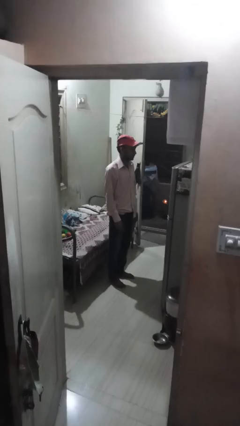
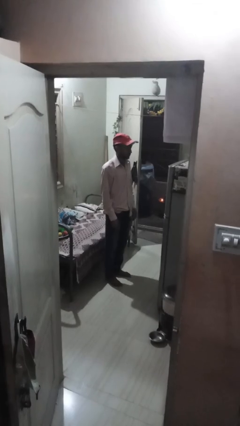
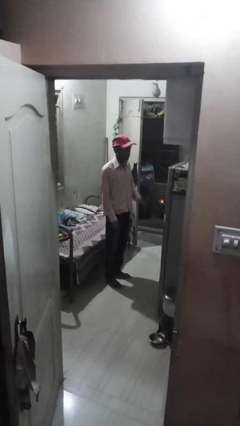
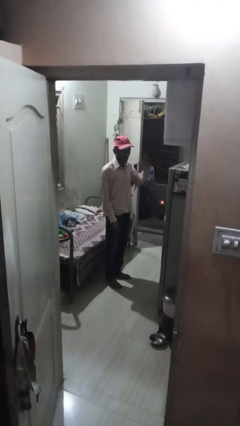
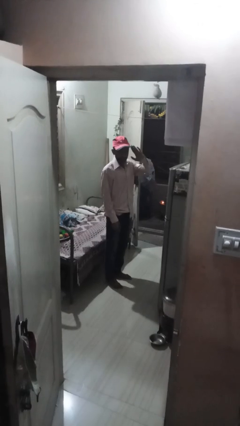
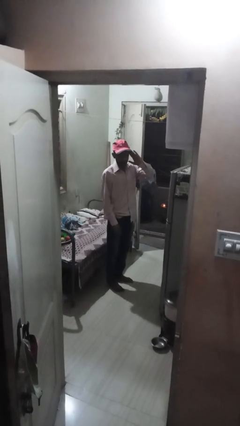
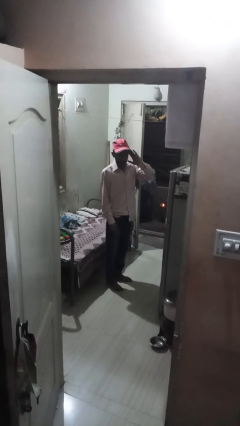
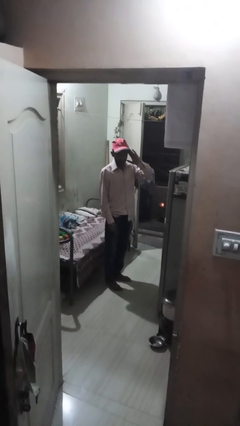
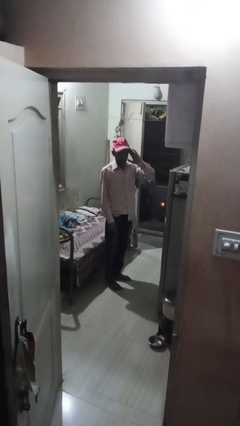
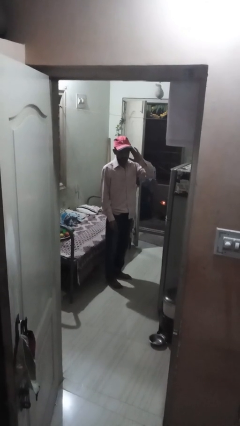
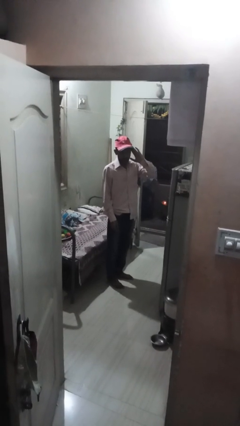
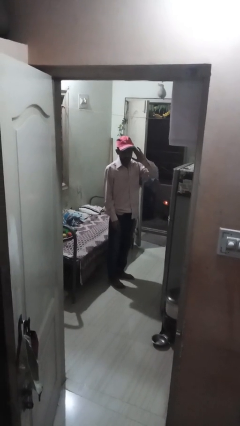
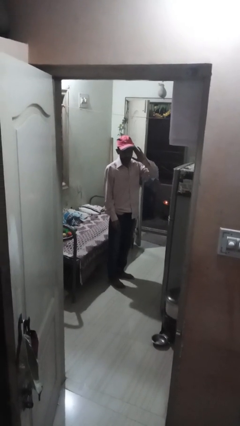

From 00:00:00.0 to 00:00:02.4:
person salutes

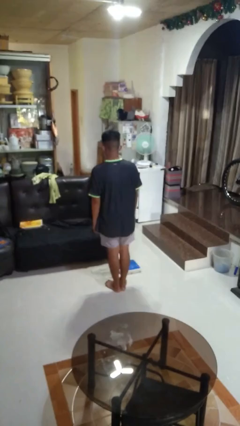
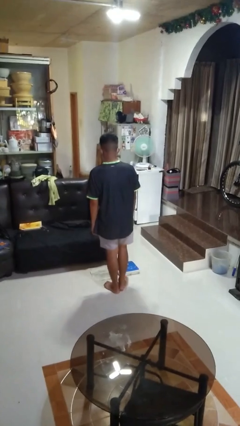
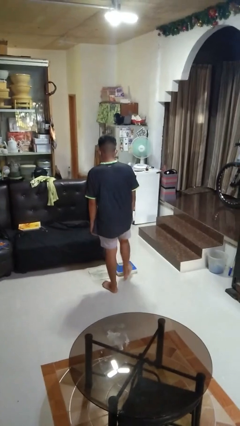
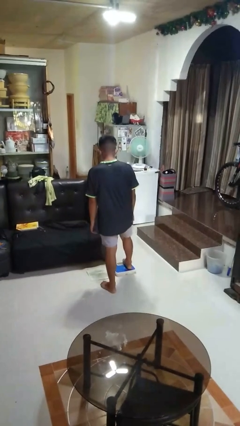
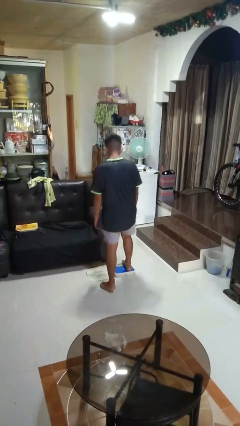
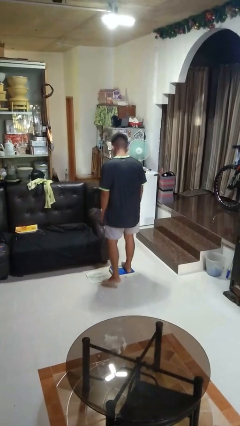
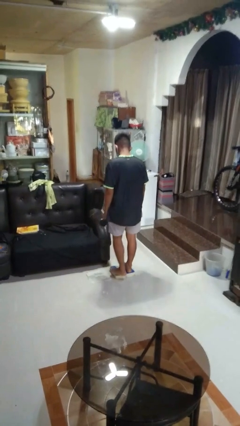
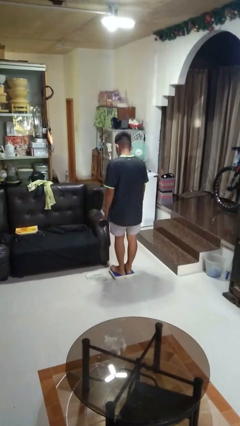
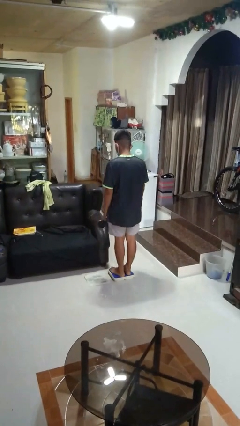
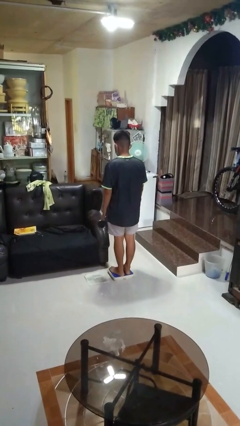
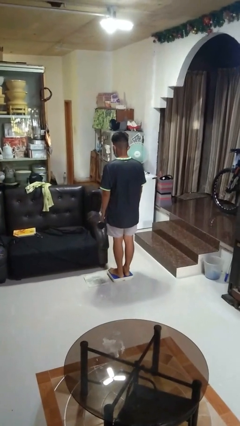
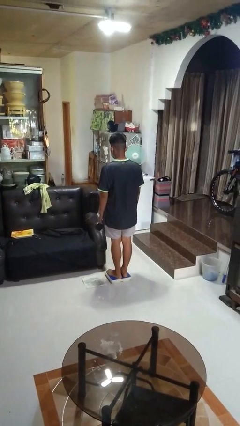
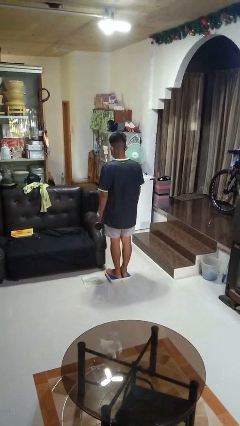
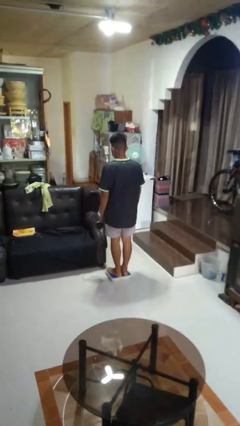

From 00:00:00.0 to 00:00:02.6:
person uses bodyweight scale

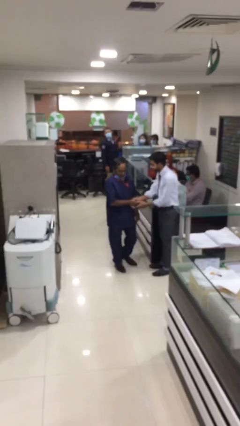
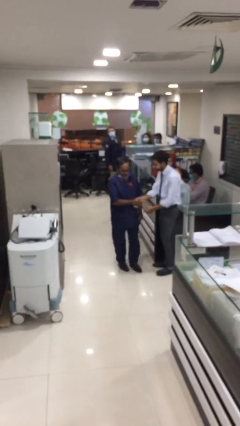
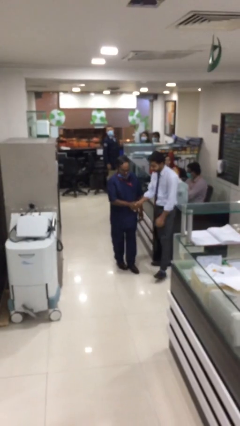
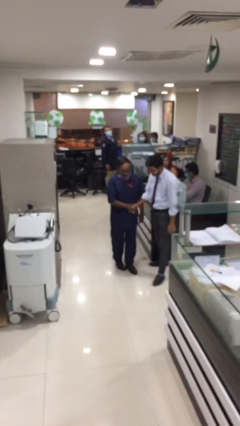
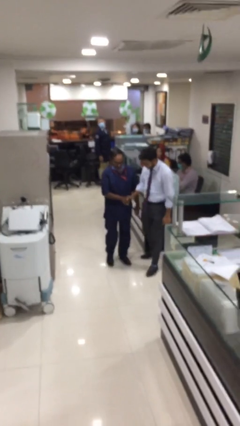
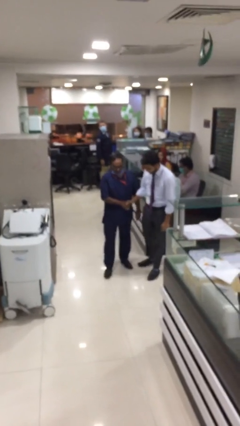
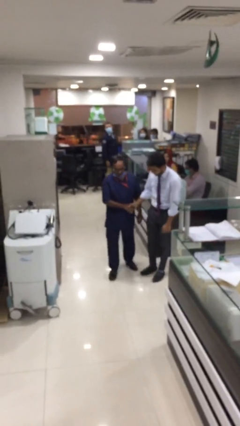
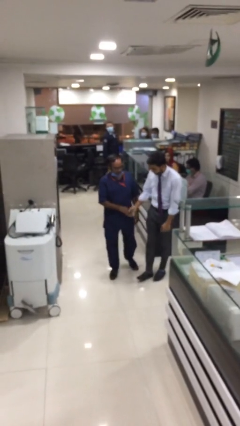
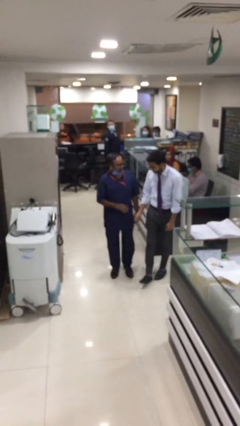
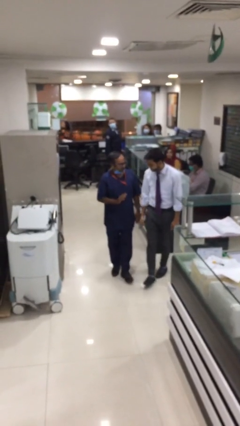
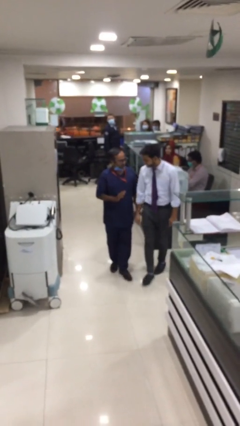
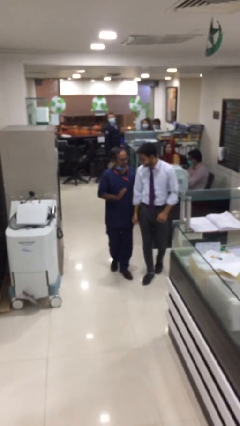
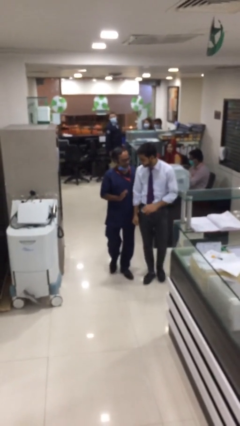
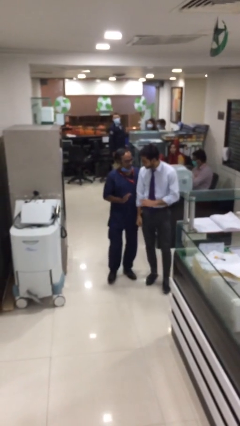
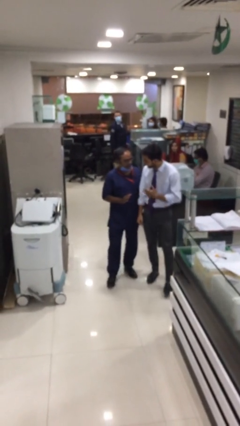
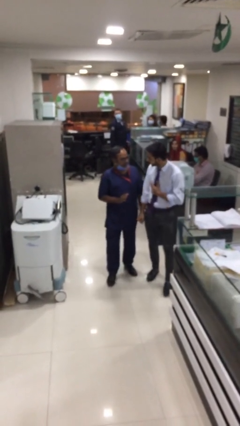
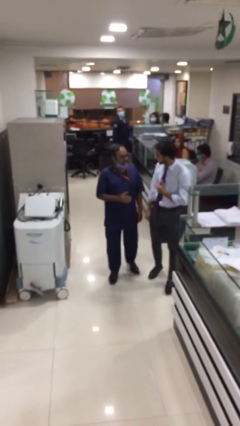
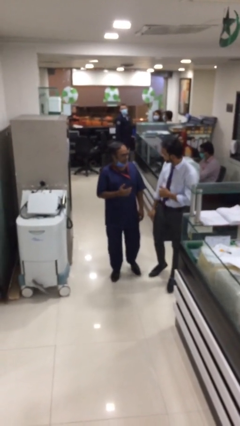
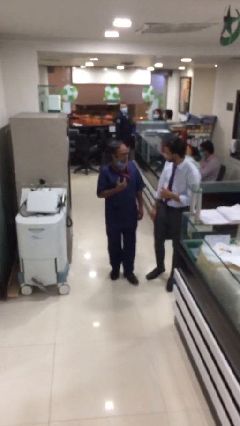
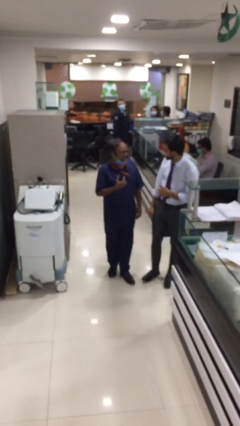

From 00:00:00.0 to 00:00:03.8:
person talks to person

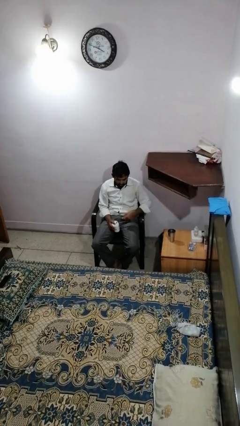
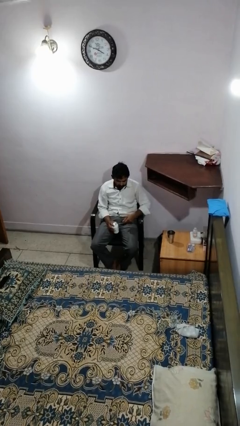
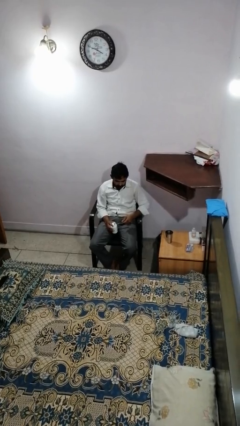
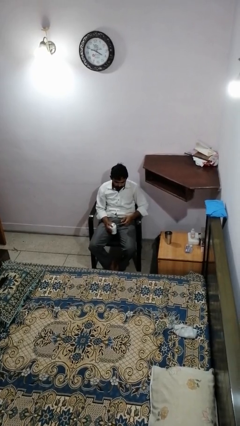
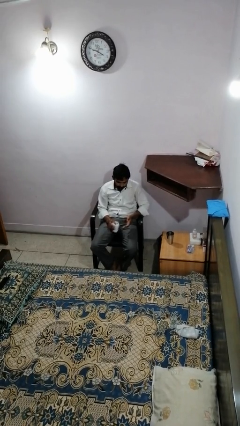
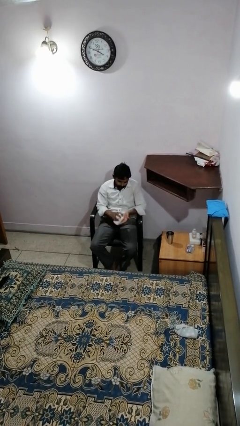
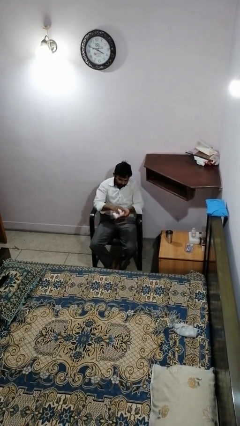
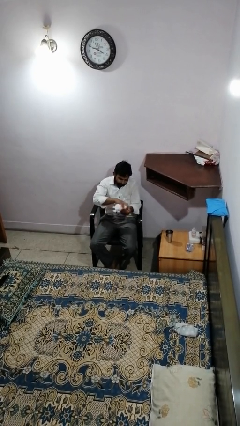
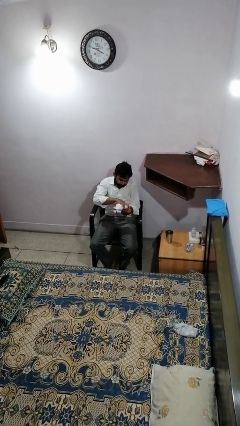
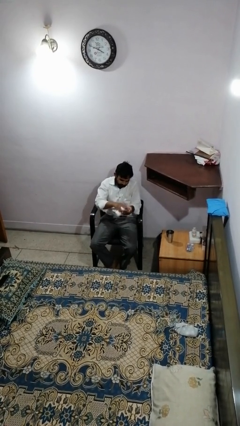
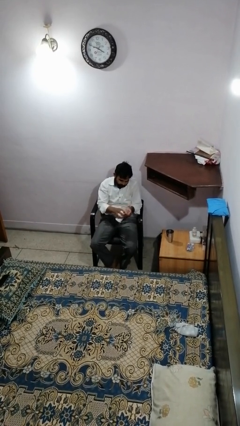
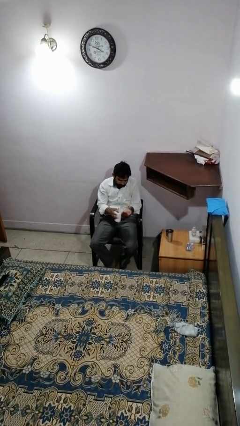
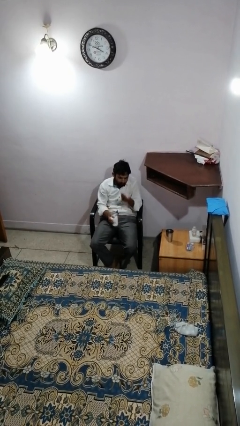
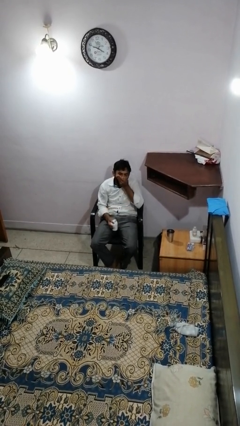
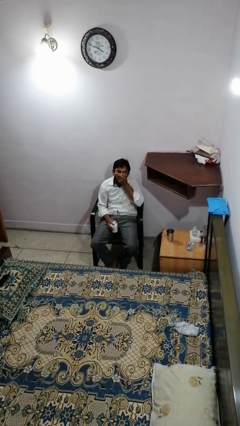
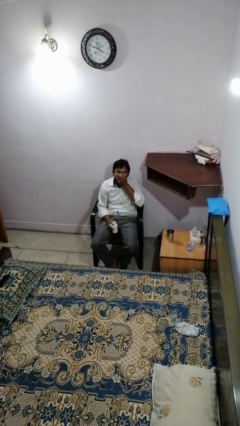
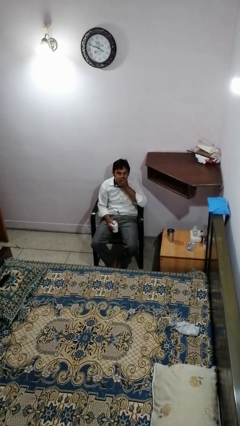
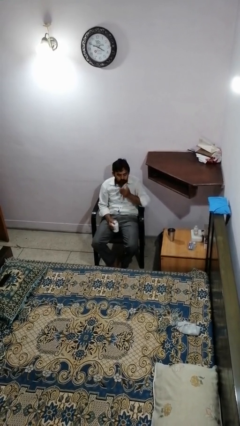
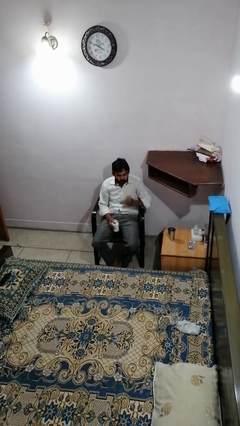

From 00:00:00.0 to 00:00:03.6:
person takes medicine pills

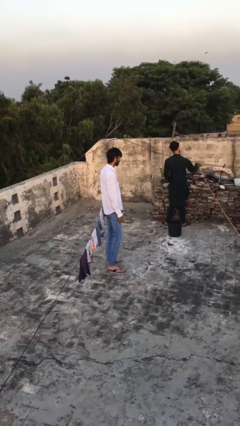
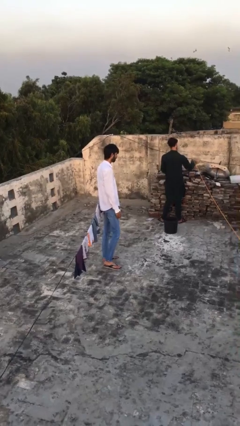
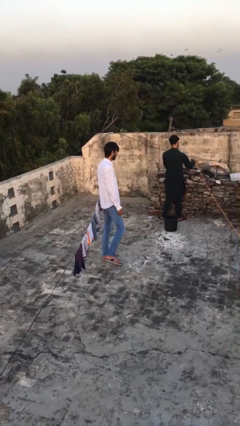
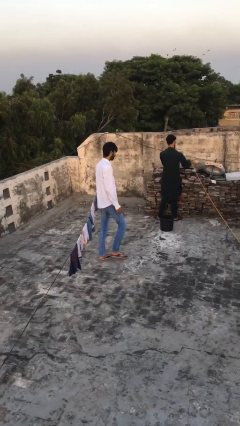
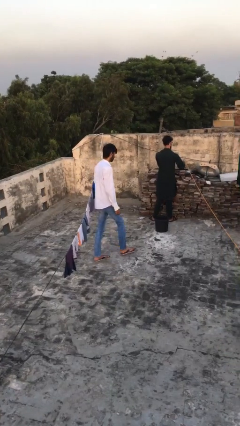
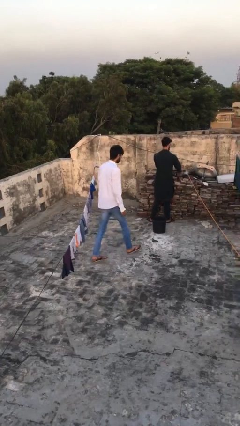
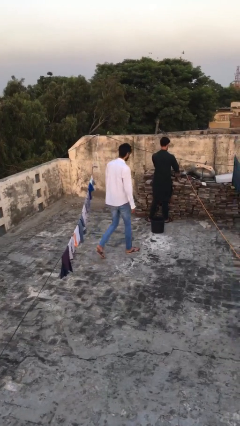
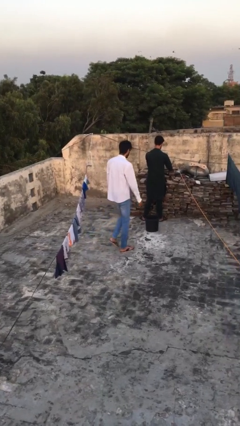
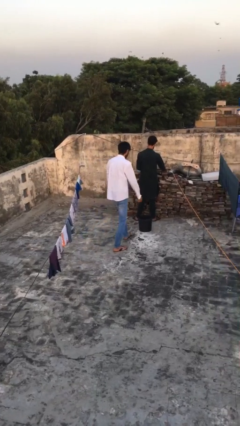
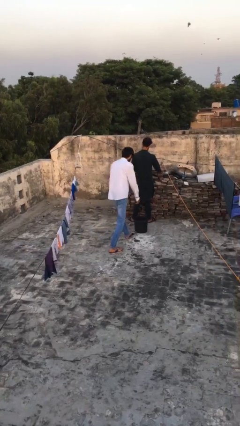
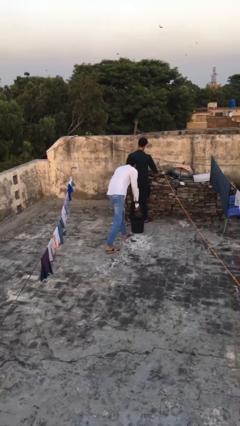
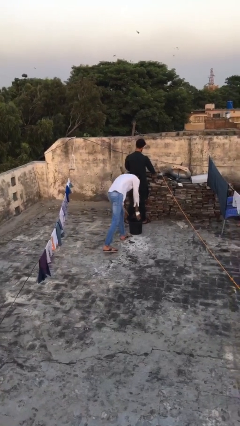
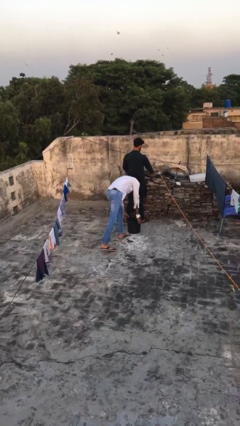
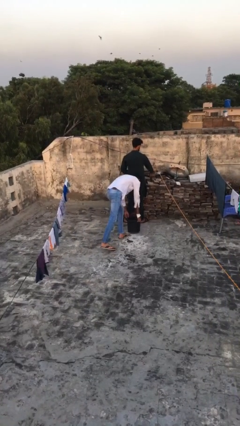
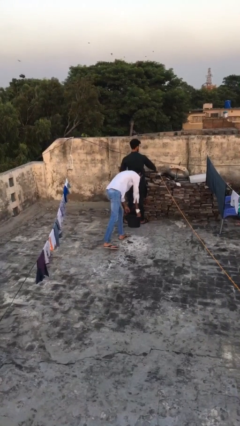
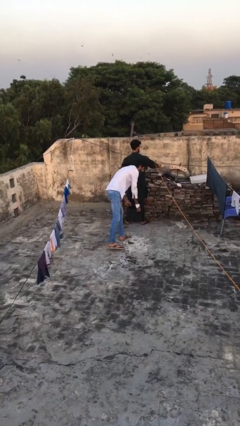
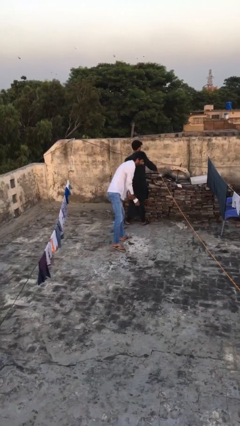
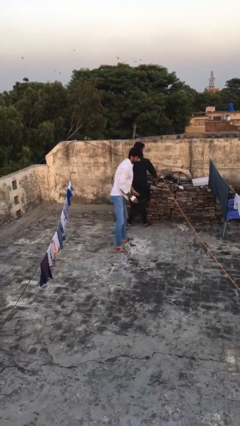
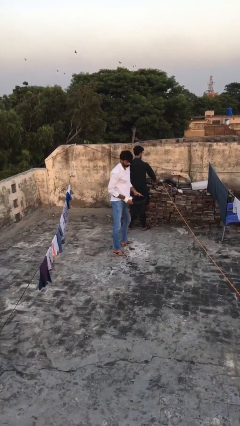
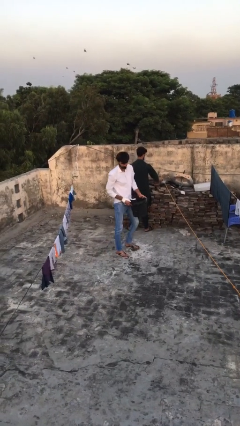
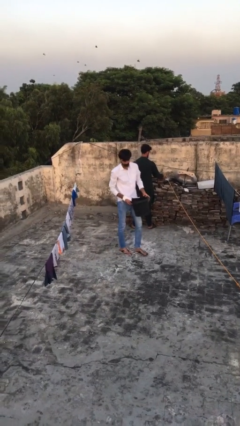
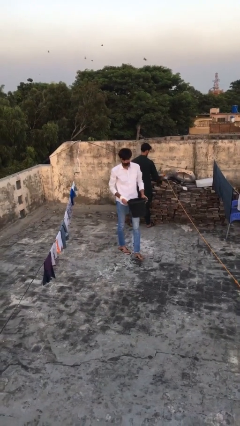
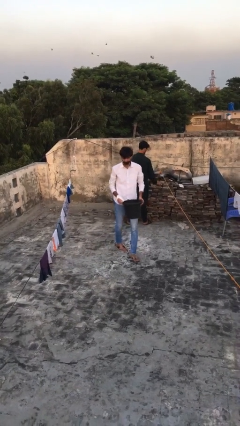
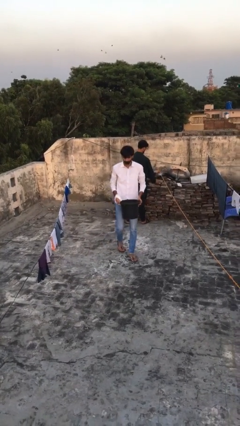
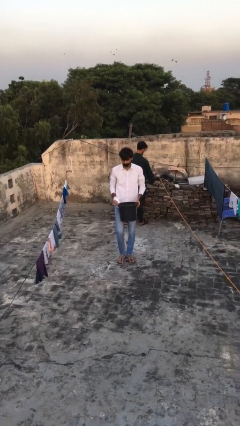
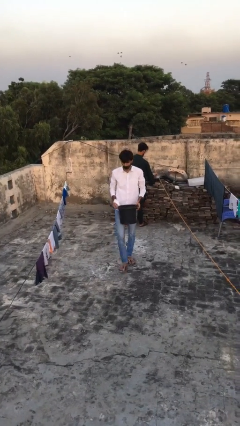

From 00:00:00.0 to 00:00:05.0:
person steals object from person

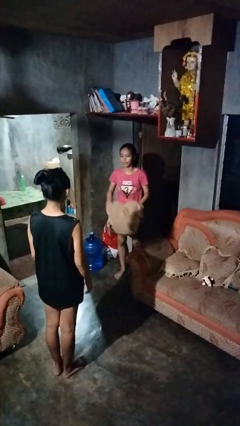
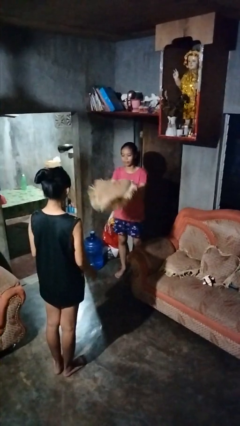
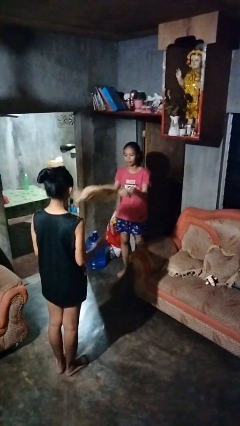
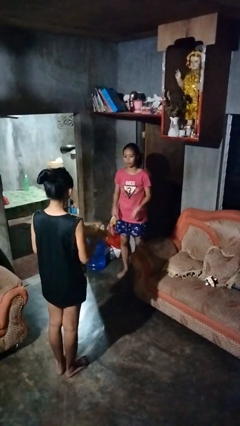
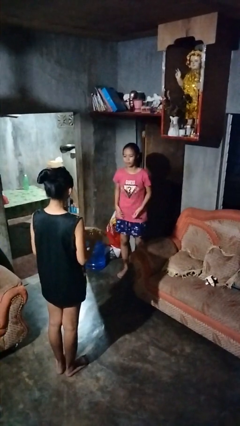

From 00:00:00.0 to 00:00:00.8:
person throws object to person
